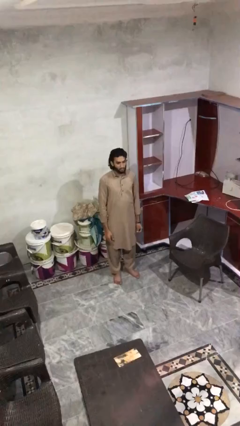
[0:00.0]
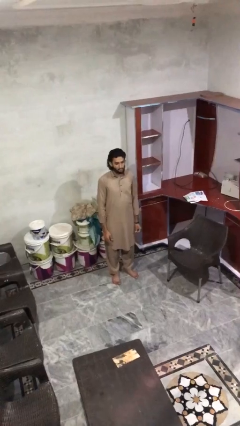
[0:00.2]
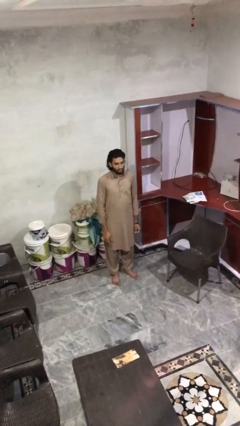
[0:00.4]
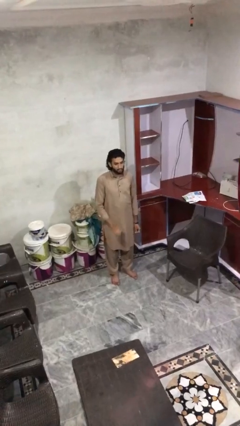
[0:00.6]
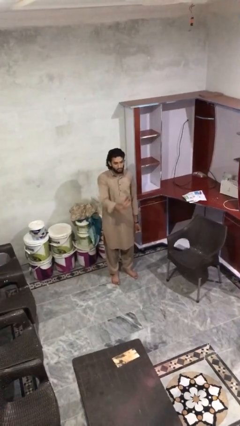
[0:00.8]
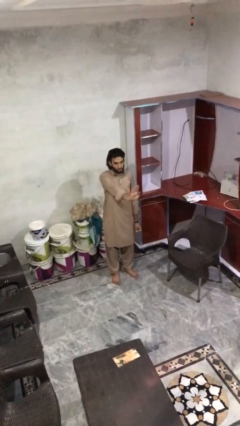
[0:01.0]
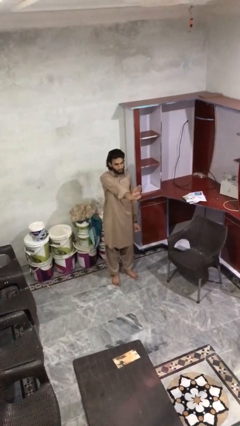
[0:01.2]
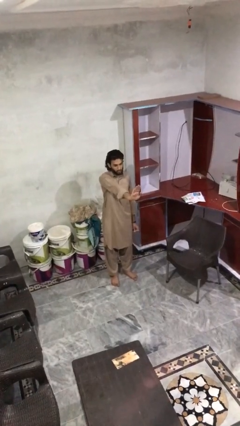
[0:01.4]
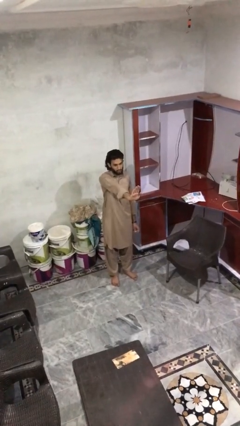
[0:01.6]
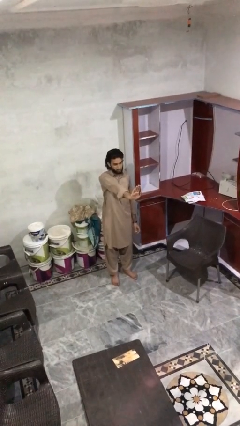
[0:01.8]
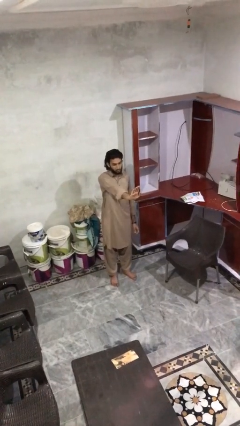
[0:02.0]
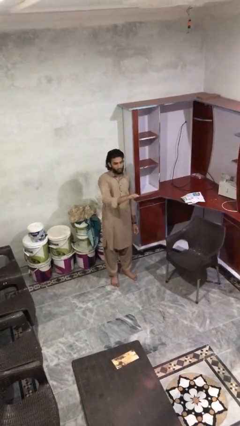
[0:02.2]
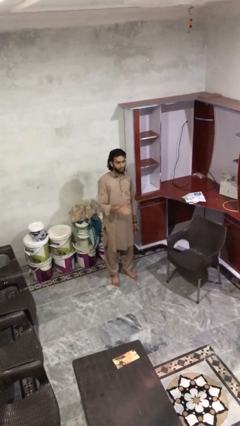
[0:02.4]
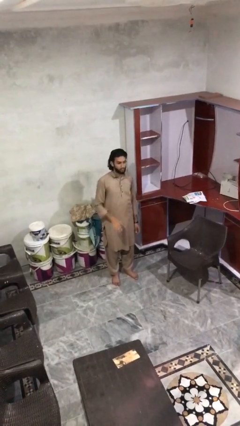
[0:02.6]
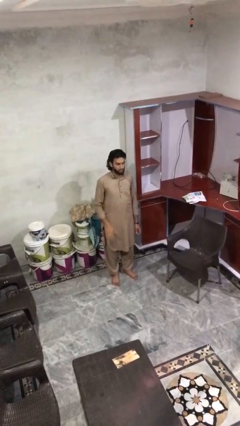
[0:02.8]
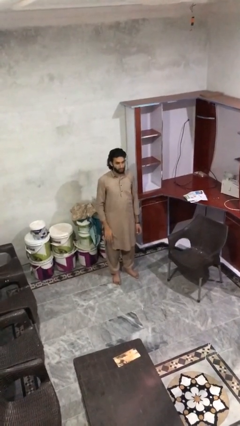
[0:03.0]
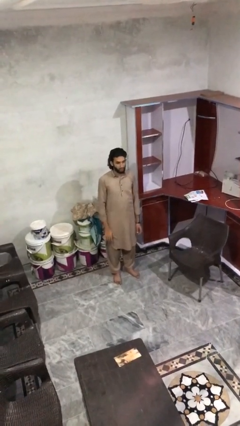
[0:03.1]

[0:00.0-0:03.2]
person gestures stop

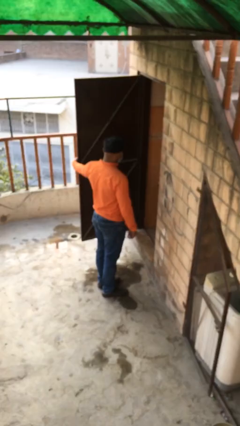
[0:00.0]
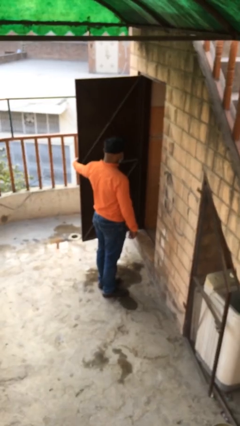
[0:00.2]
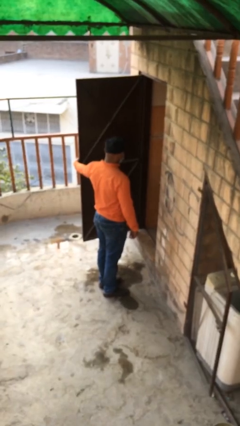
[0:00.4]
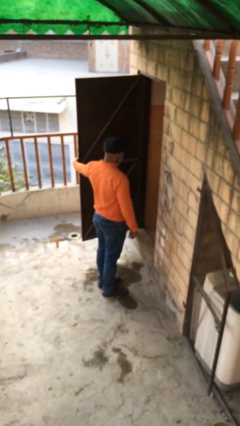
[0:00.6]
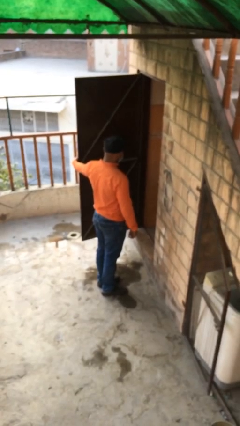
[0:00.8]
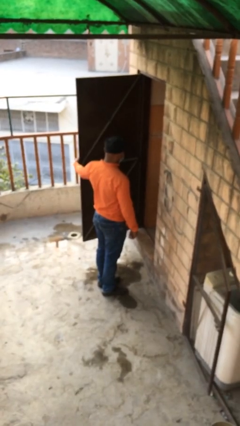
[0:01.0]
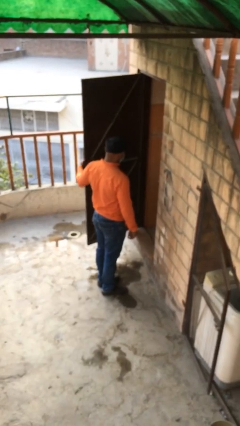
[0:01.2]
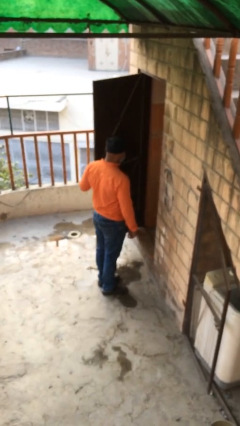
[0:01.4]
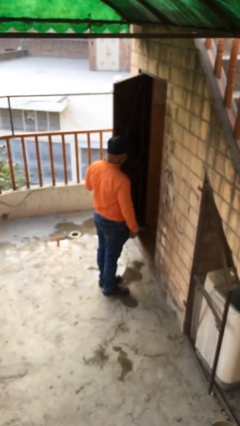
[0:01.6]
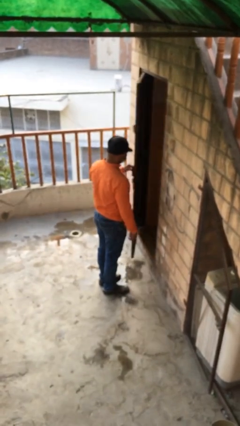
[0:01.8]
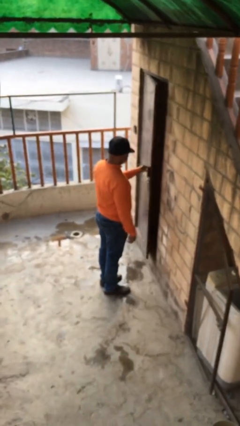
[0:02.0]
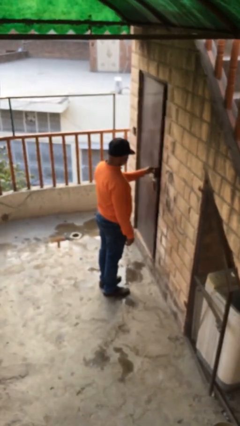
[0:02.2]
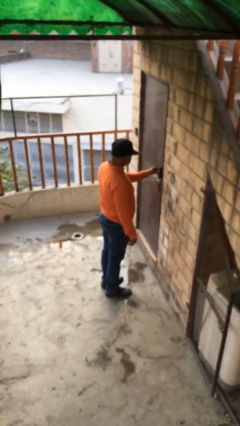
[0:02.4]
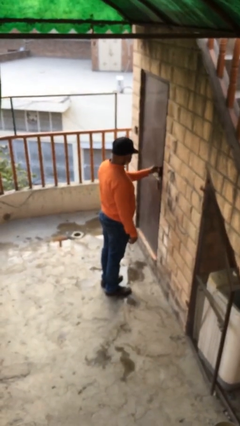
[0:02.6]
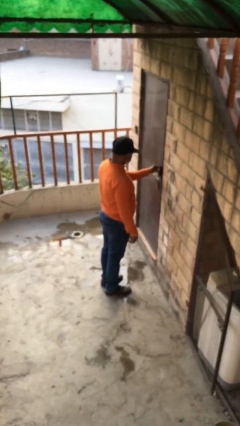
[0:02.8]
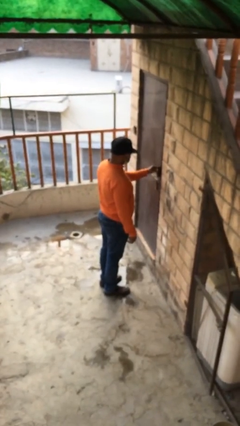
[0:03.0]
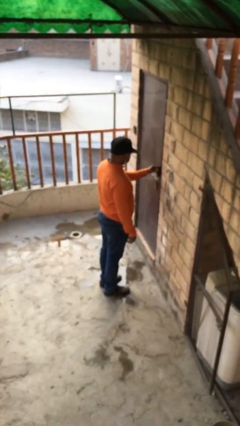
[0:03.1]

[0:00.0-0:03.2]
person closes facility door

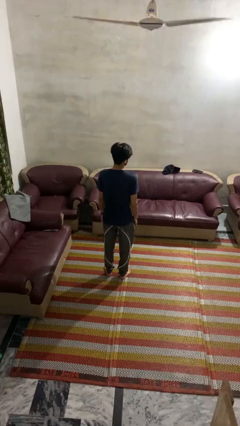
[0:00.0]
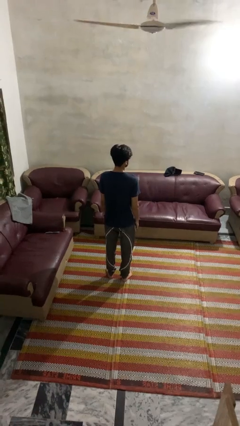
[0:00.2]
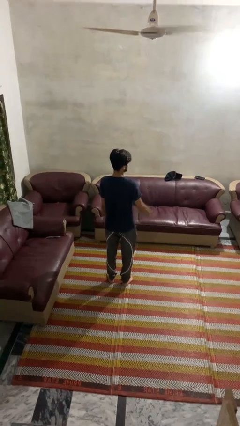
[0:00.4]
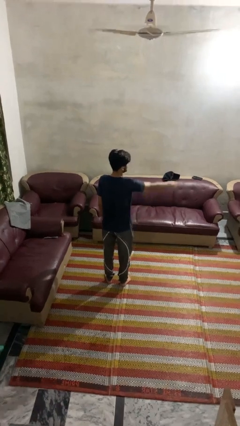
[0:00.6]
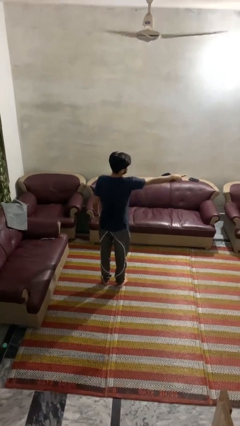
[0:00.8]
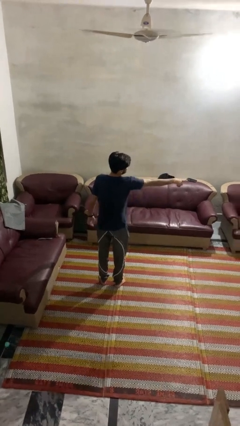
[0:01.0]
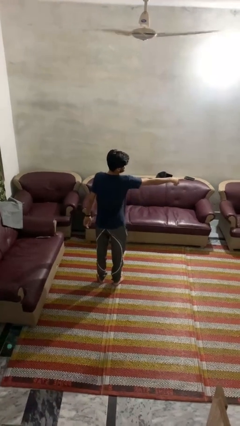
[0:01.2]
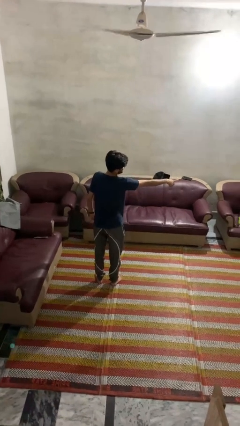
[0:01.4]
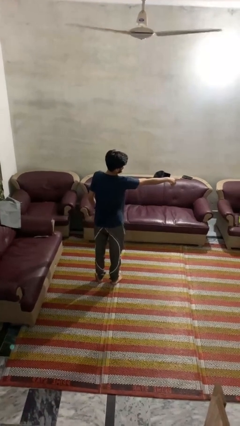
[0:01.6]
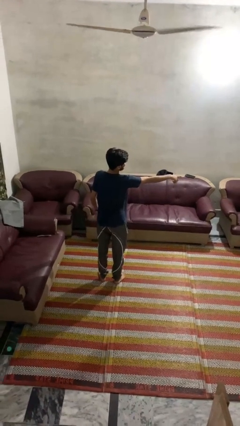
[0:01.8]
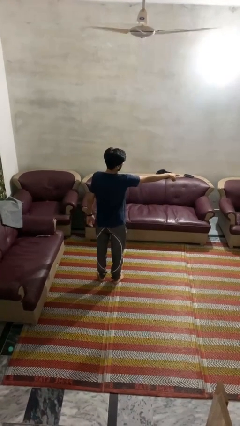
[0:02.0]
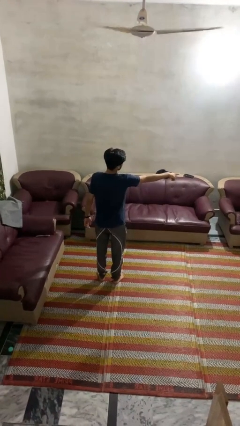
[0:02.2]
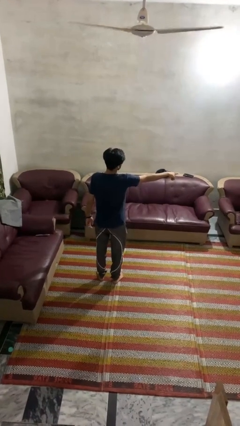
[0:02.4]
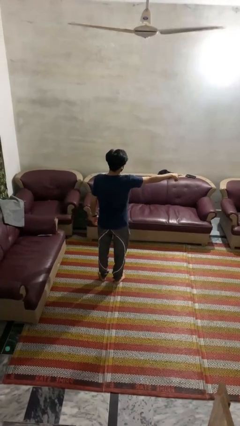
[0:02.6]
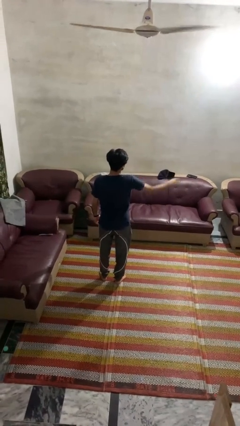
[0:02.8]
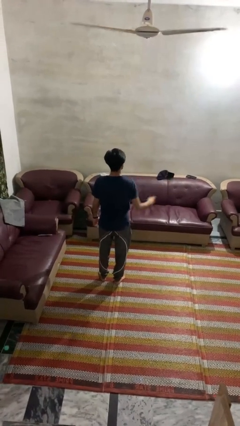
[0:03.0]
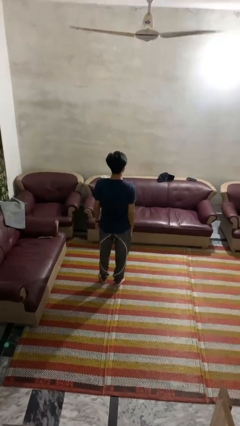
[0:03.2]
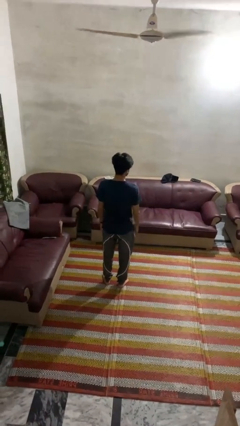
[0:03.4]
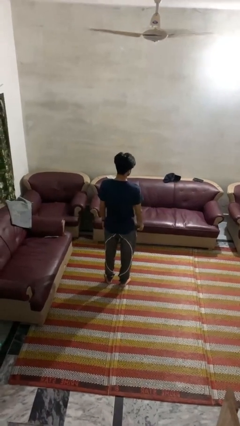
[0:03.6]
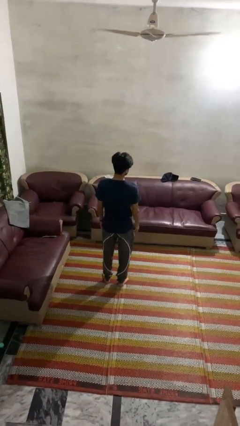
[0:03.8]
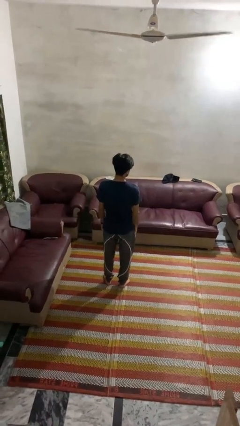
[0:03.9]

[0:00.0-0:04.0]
person points at person

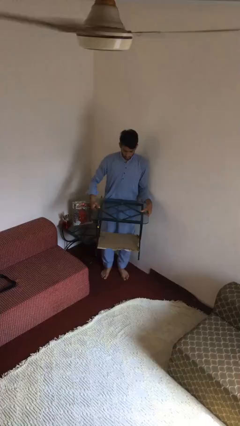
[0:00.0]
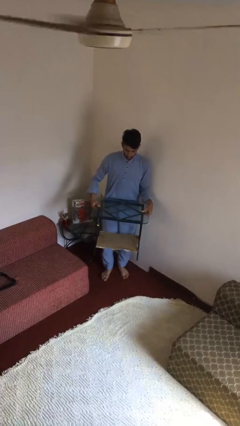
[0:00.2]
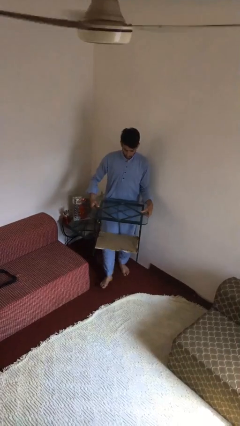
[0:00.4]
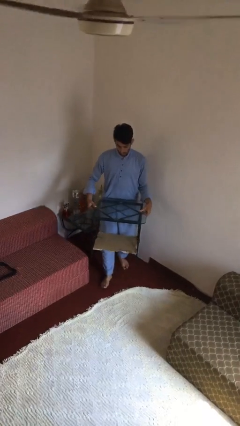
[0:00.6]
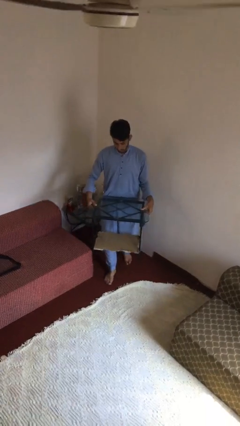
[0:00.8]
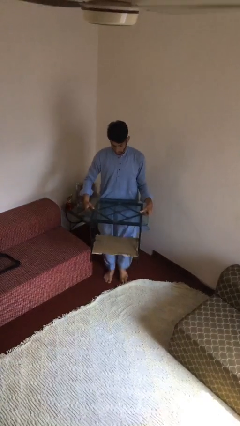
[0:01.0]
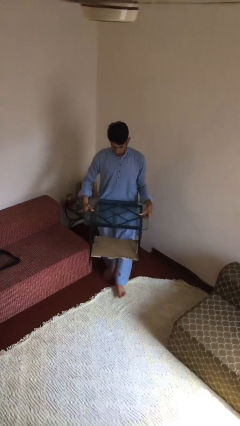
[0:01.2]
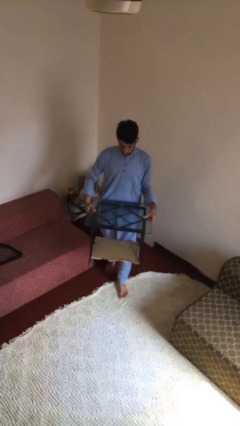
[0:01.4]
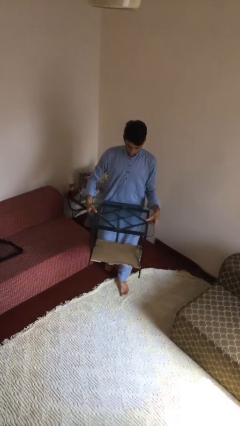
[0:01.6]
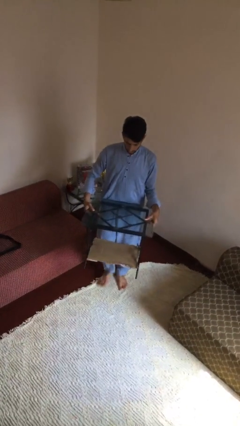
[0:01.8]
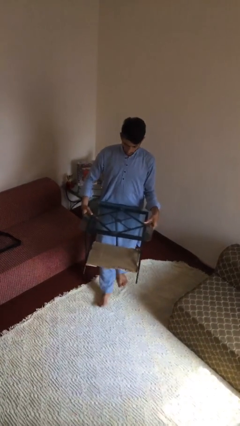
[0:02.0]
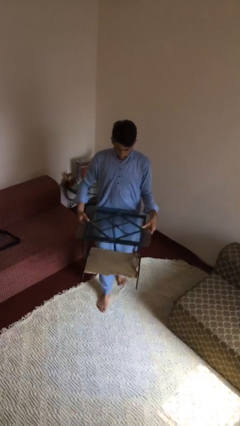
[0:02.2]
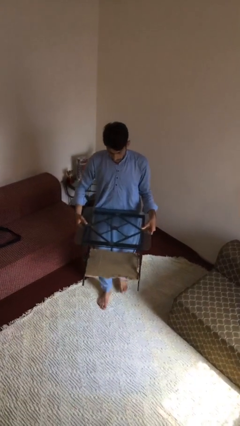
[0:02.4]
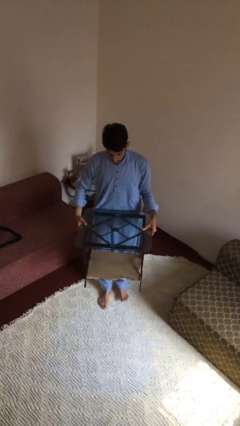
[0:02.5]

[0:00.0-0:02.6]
person carries heavy object

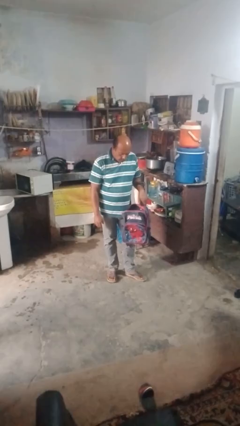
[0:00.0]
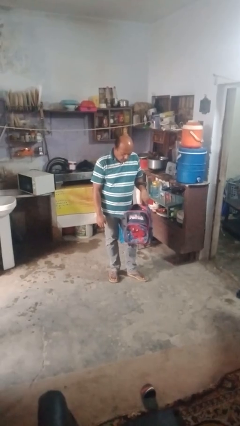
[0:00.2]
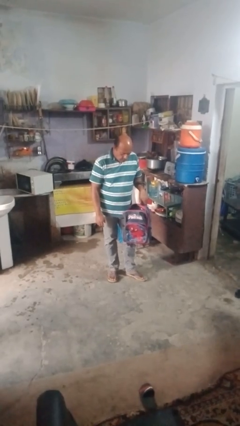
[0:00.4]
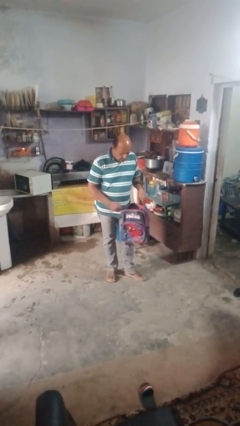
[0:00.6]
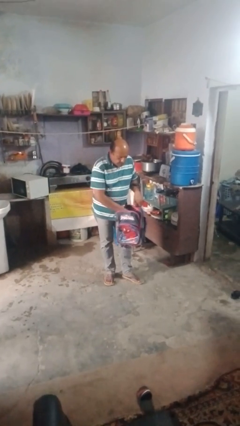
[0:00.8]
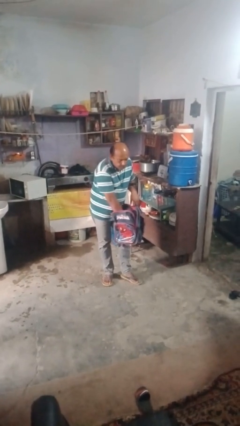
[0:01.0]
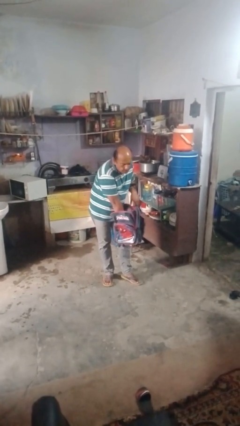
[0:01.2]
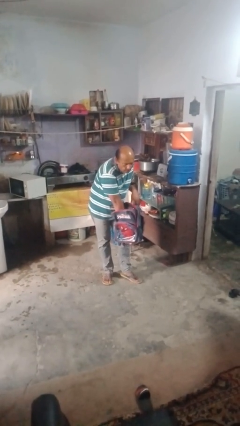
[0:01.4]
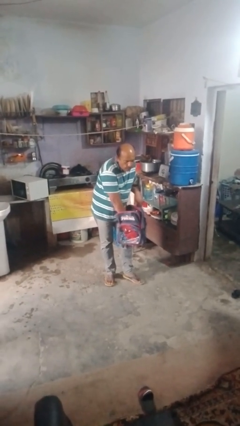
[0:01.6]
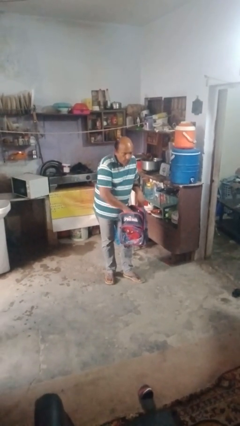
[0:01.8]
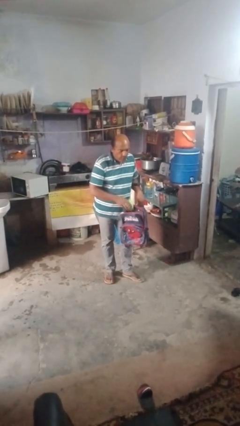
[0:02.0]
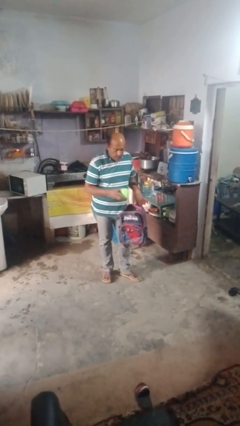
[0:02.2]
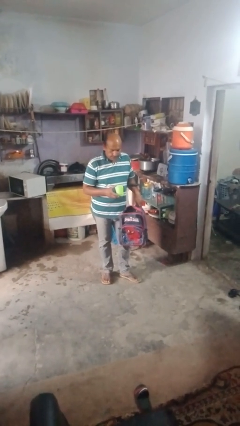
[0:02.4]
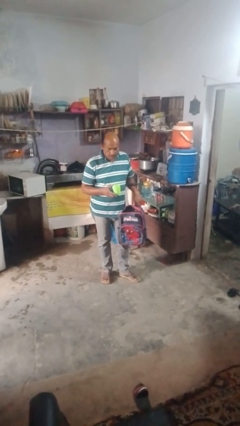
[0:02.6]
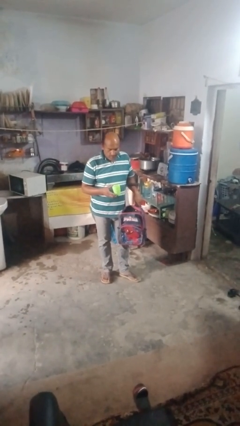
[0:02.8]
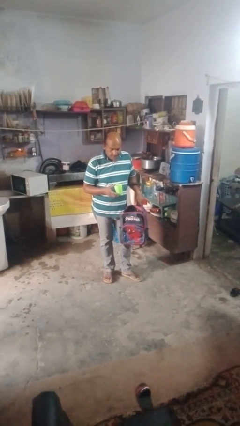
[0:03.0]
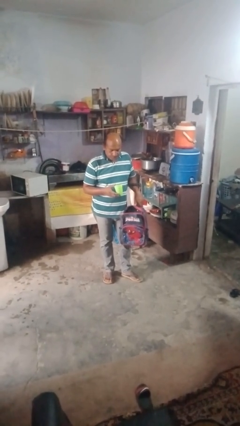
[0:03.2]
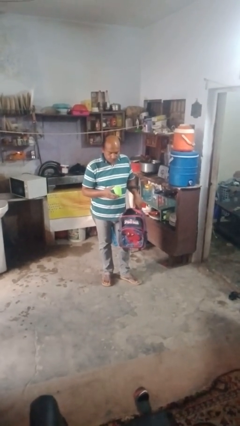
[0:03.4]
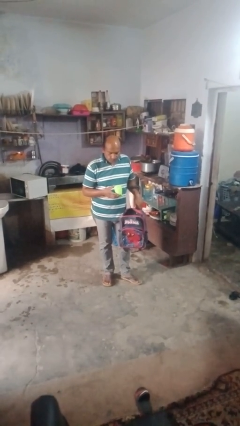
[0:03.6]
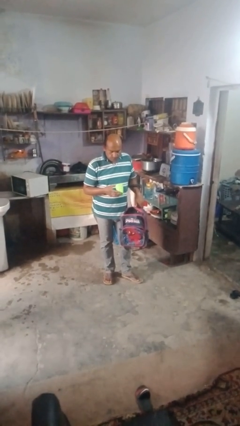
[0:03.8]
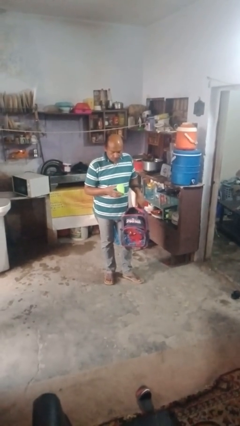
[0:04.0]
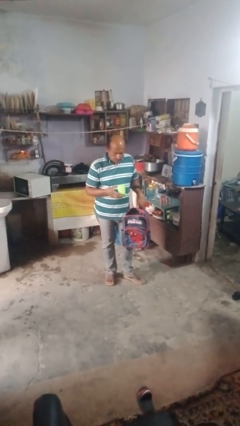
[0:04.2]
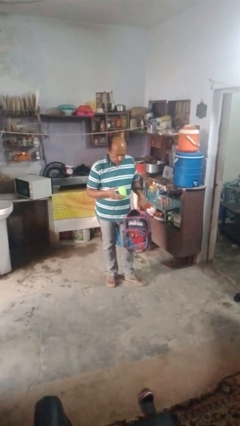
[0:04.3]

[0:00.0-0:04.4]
person takes object from bag
